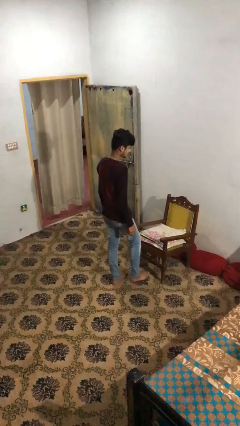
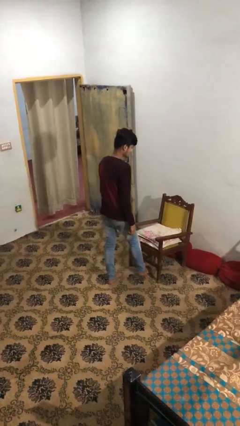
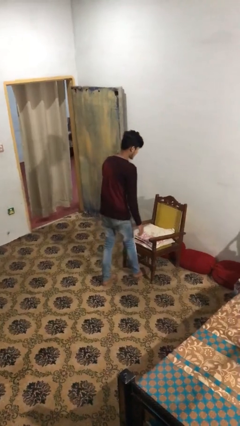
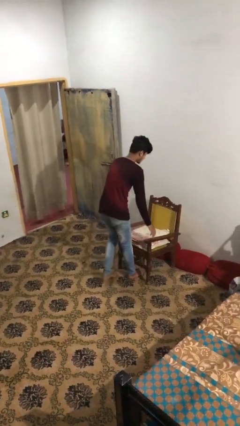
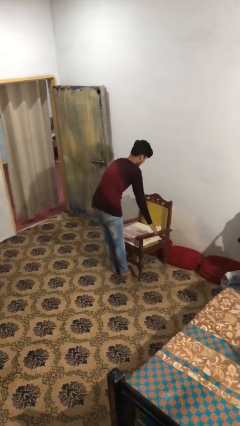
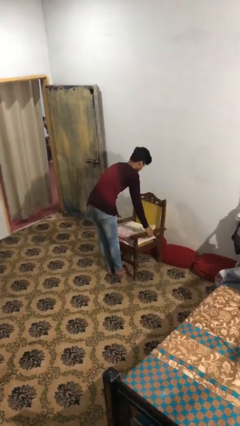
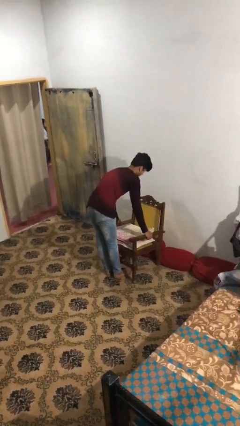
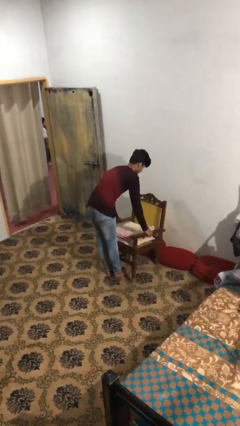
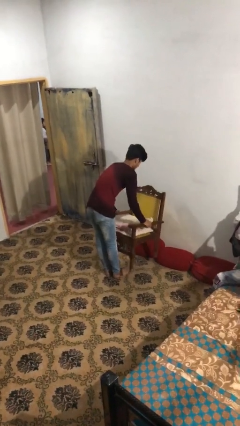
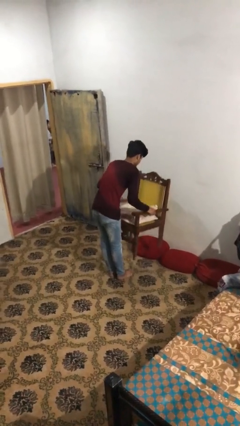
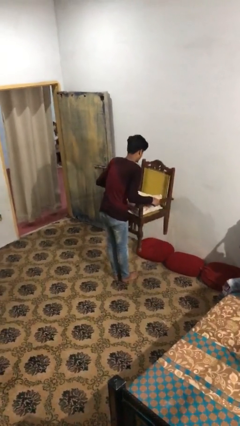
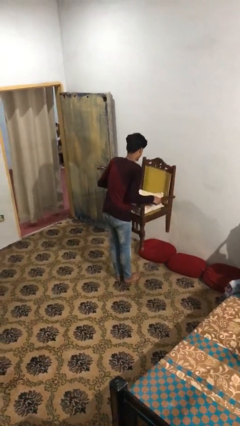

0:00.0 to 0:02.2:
person picks up object from floor

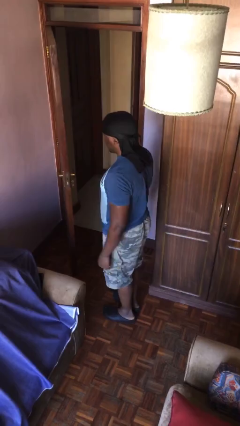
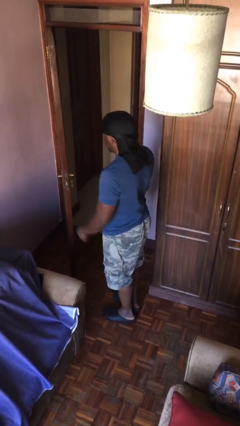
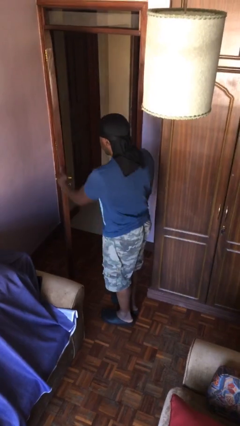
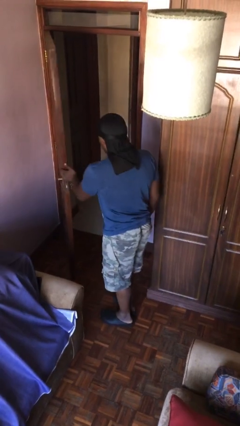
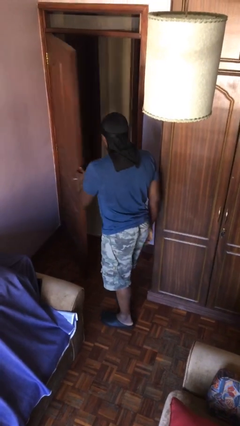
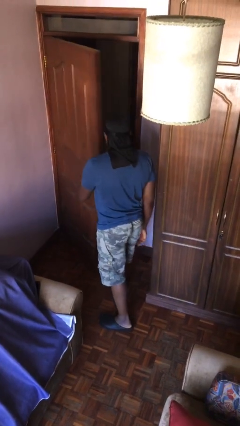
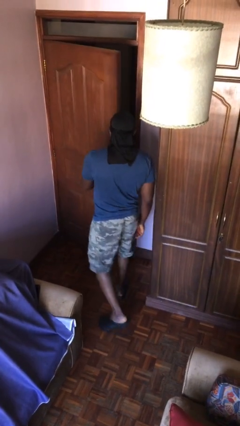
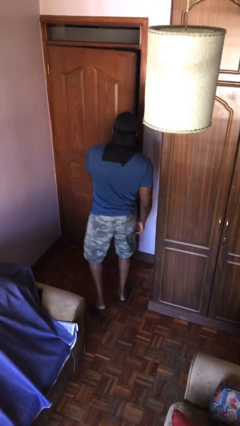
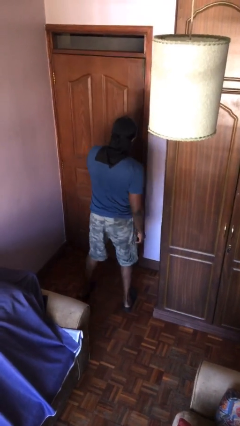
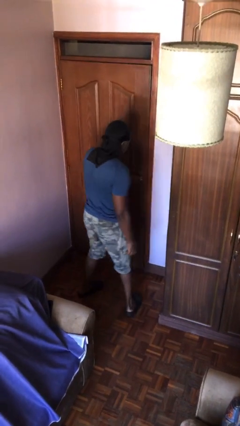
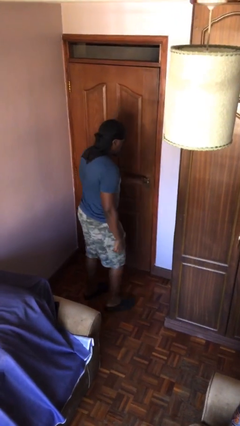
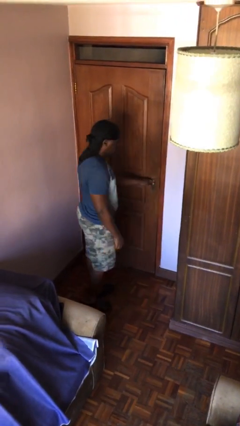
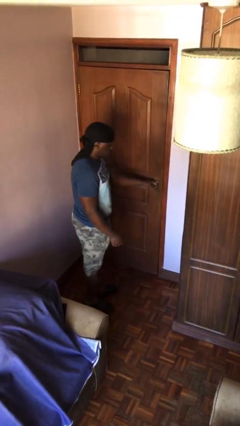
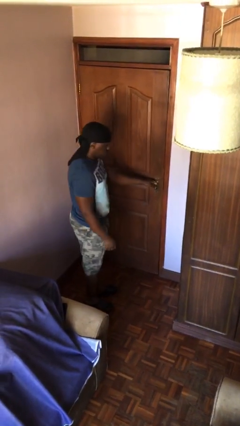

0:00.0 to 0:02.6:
person closes facility door

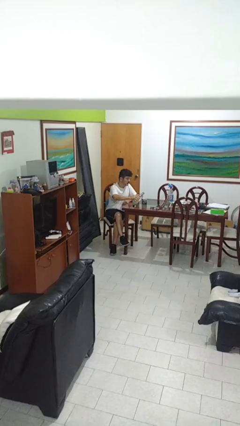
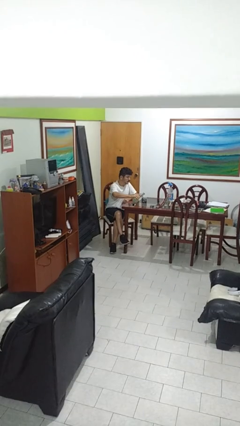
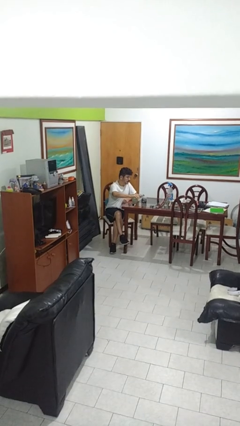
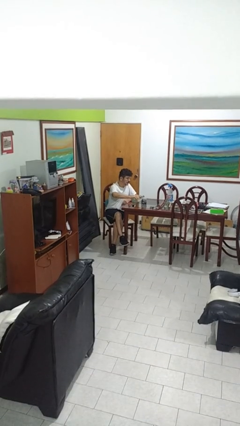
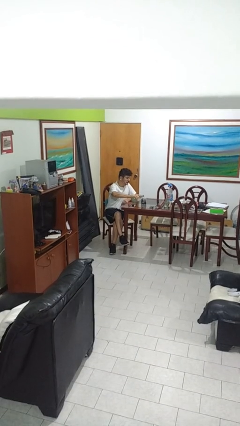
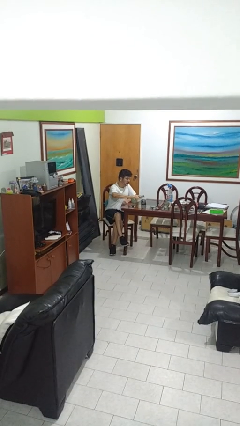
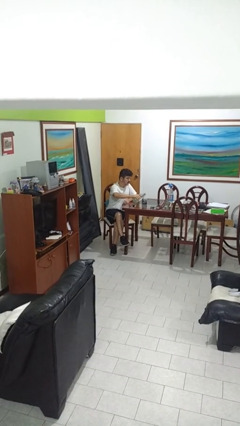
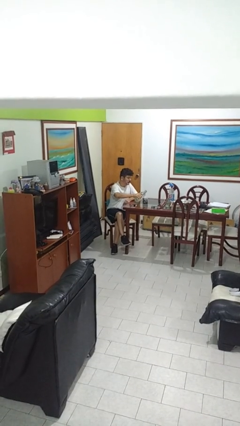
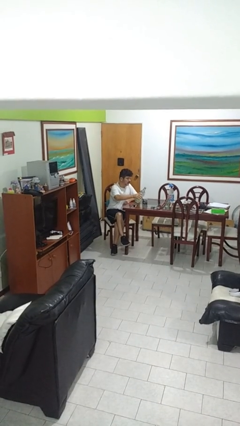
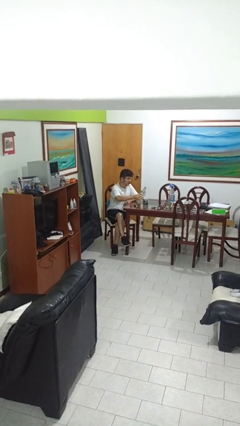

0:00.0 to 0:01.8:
person pours liquid into cup

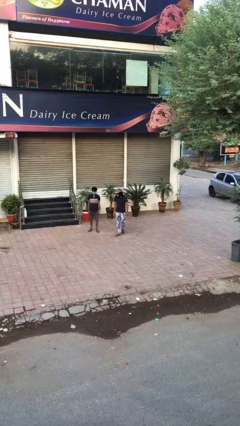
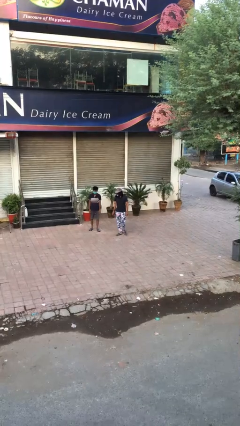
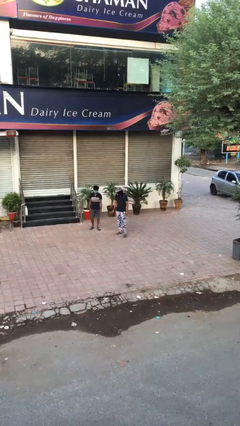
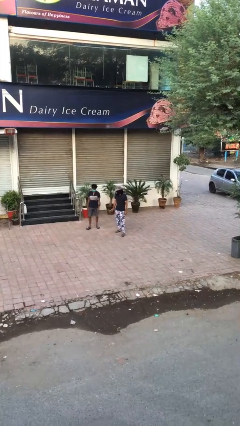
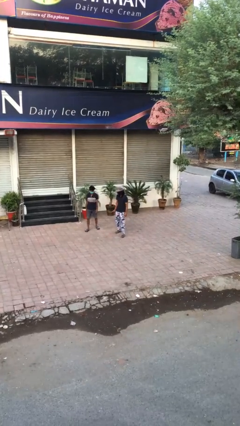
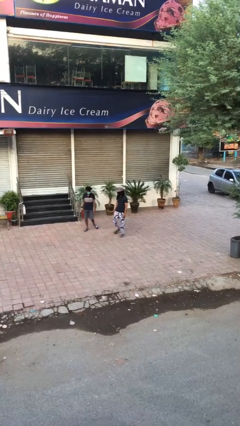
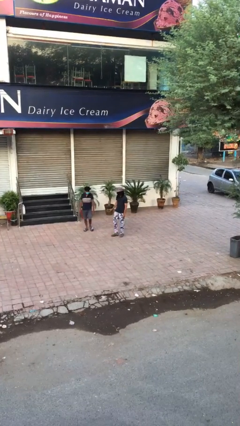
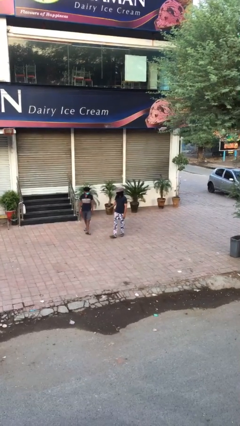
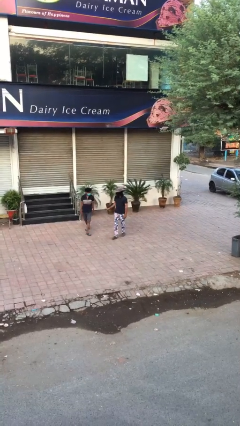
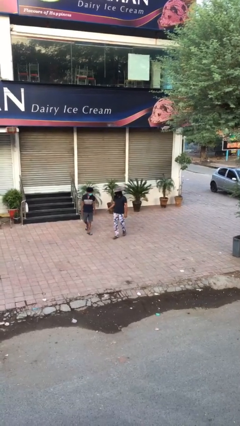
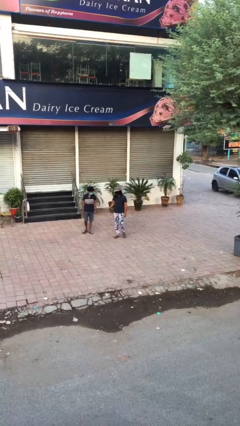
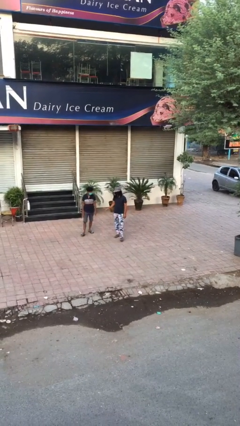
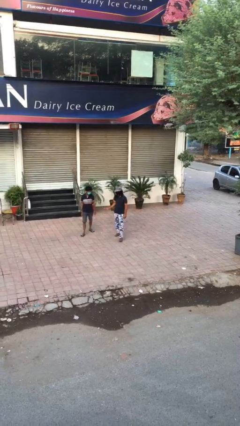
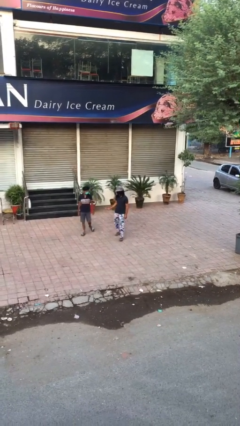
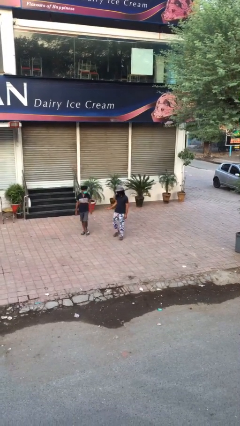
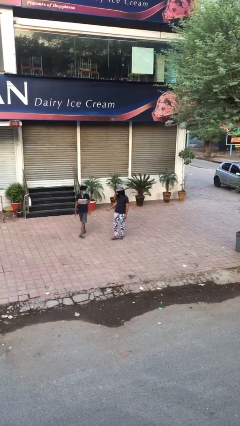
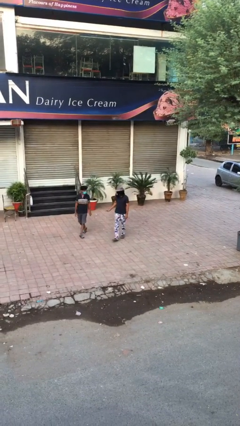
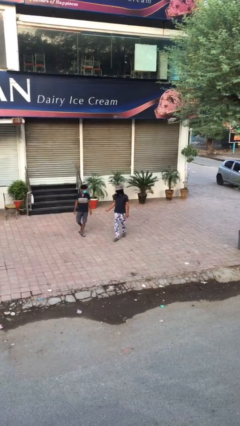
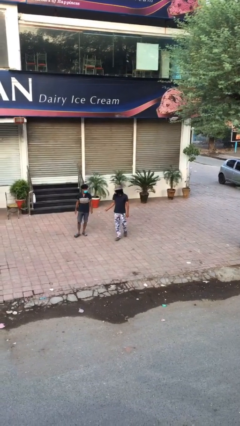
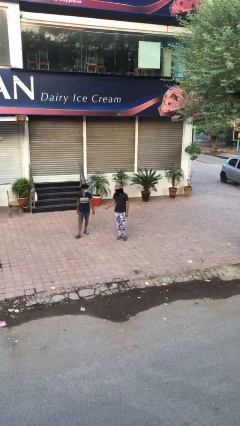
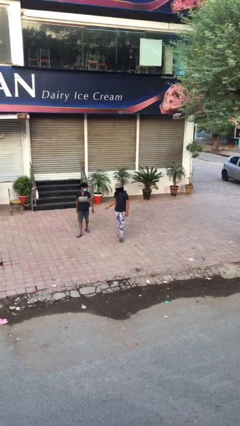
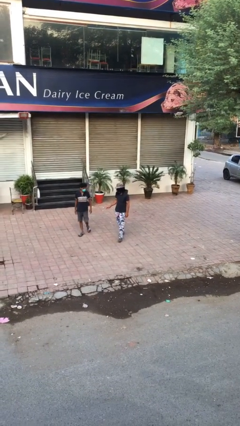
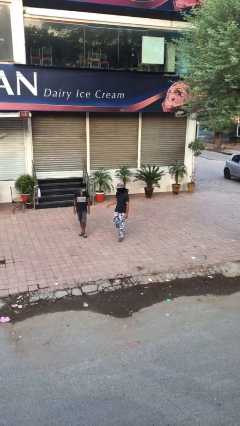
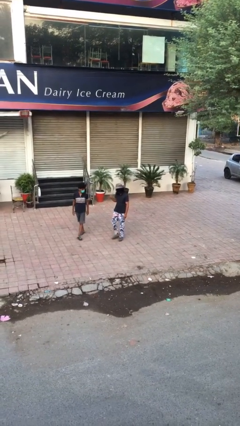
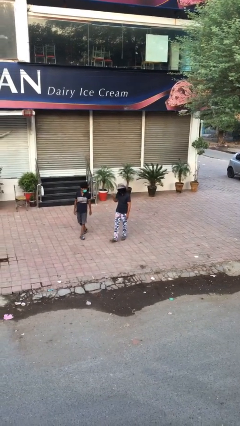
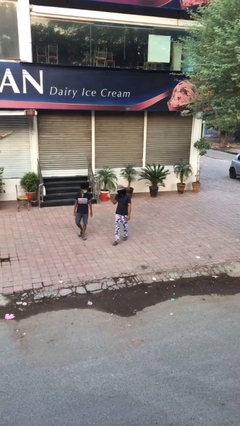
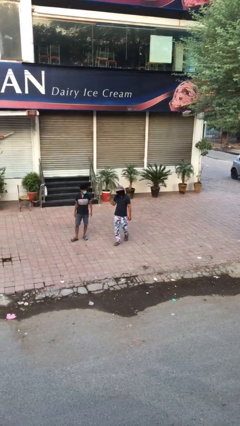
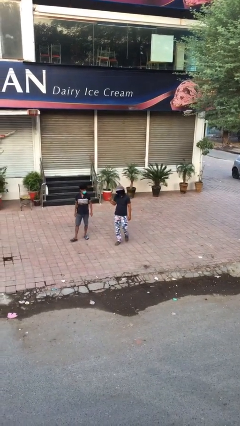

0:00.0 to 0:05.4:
person talks to person

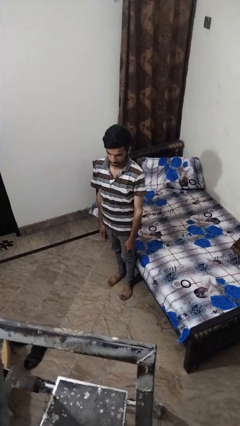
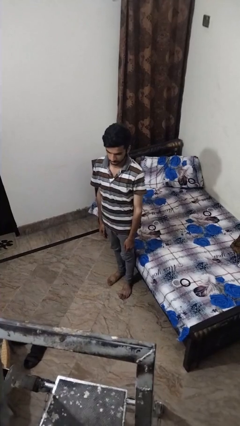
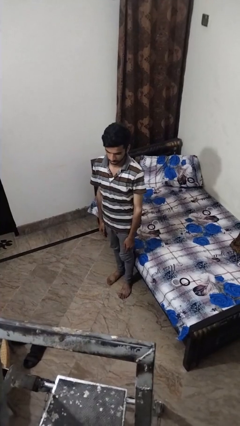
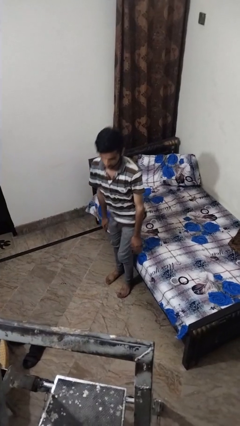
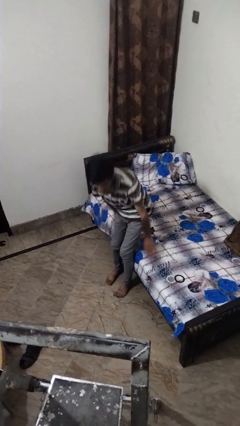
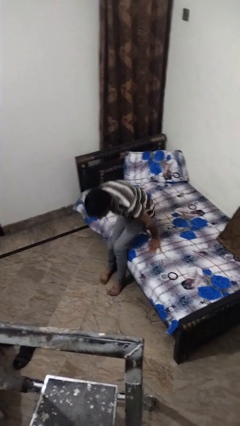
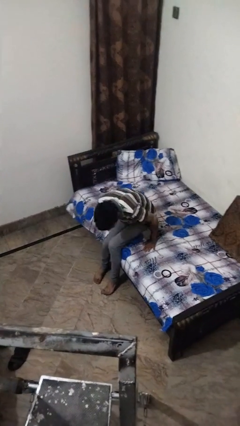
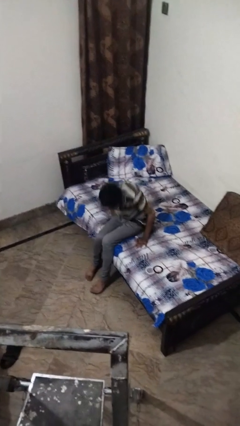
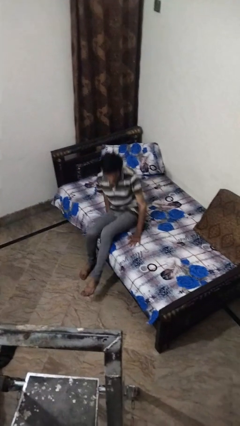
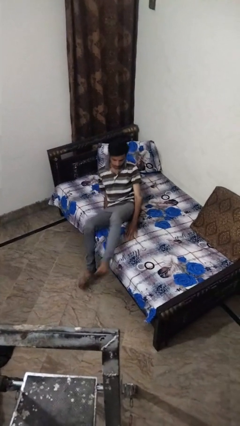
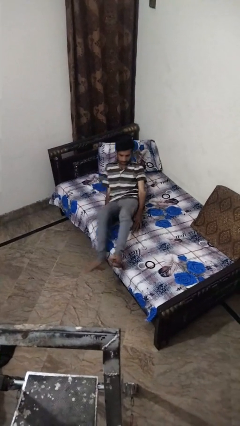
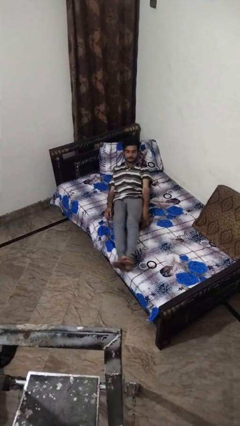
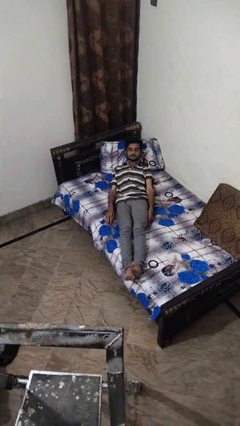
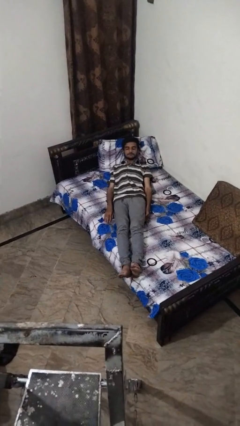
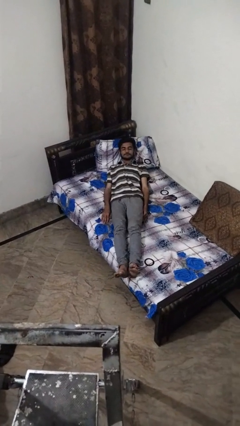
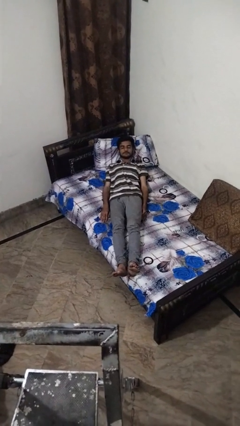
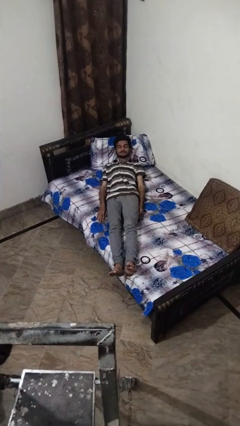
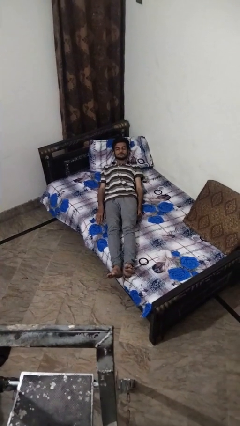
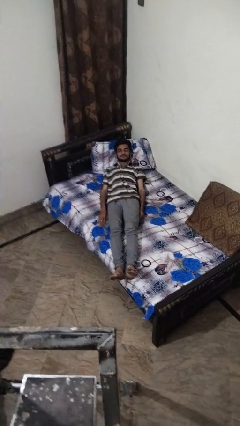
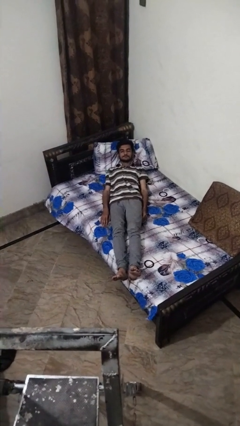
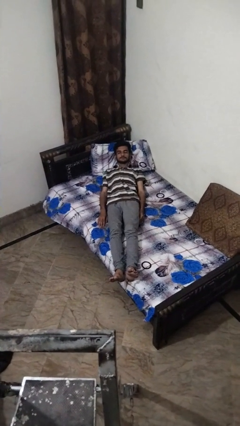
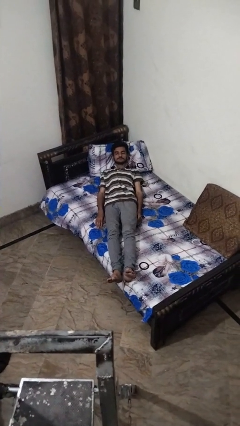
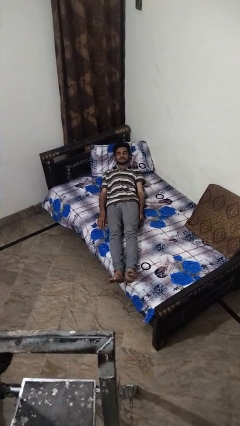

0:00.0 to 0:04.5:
person lies down on bed

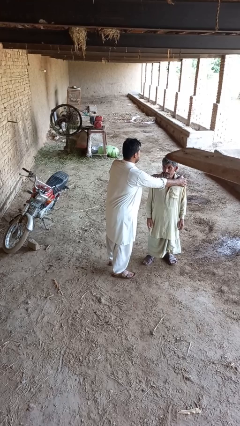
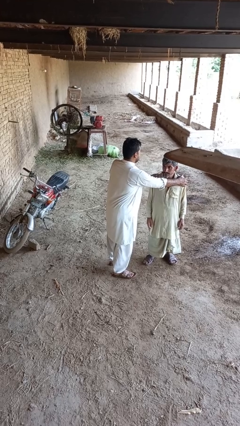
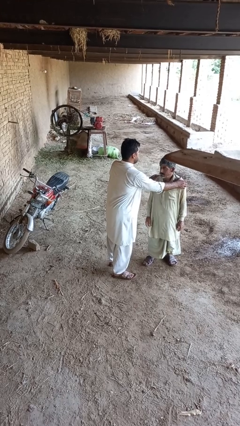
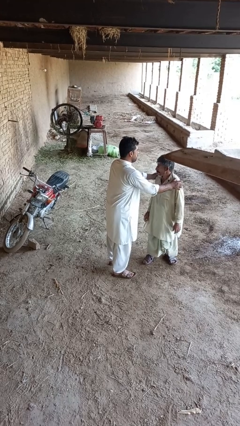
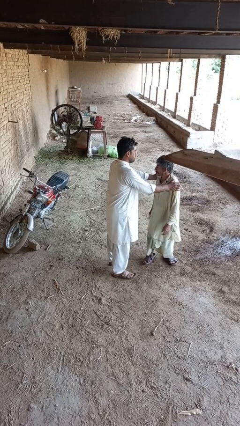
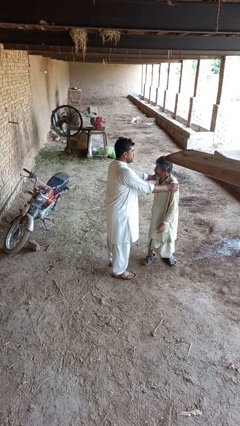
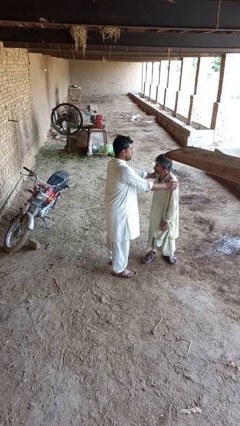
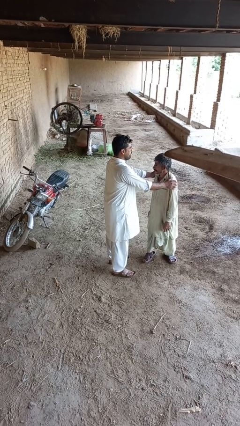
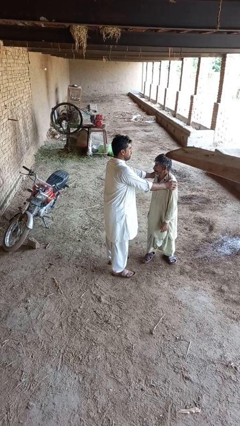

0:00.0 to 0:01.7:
person spins person around
